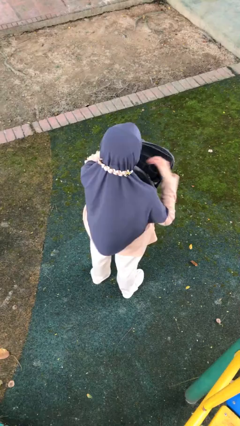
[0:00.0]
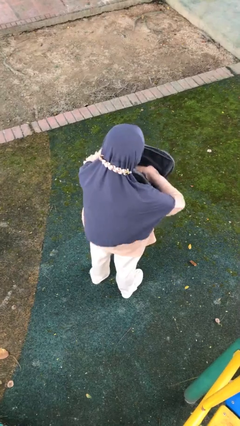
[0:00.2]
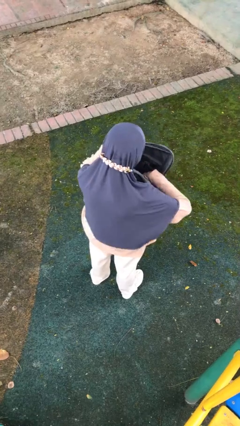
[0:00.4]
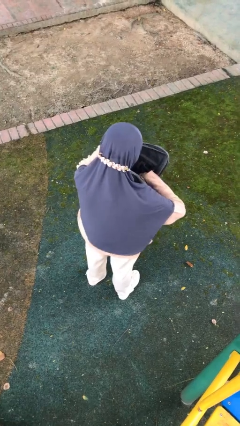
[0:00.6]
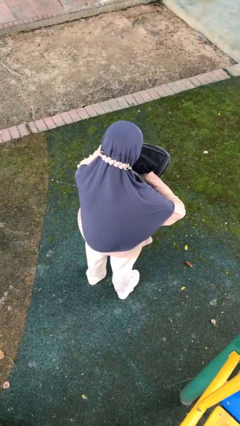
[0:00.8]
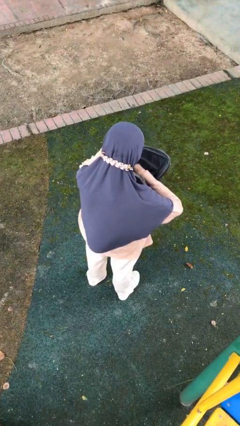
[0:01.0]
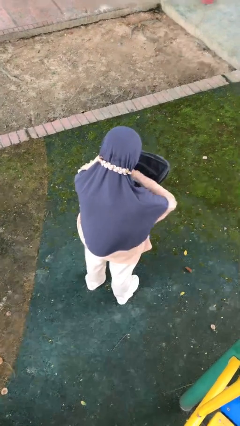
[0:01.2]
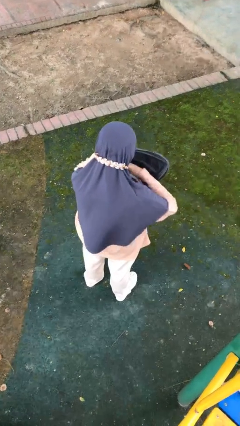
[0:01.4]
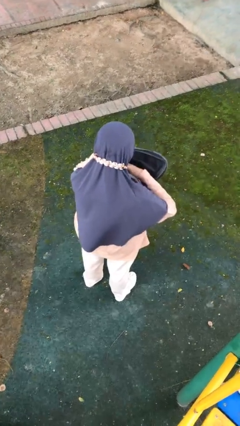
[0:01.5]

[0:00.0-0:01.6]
person searches in backpack

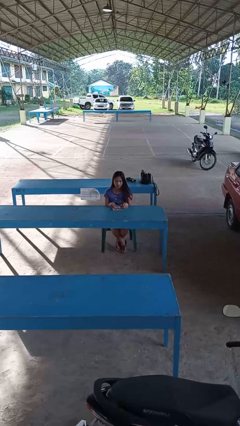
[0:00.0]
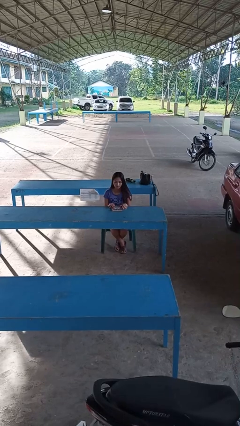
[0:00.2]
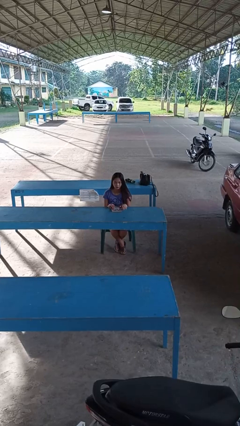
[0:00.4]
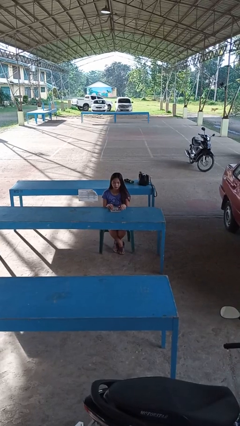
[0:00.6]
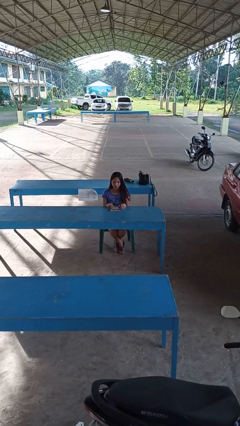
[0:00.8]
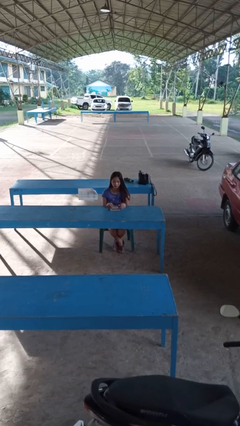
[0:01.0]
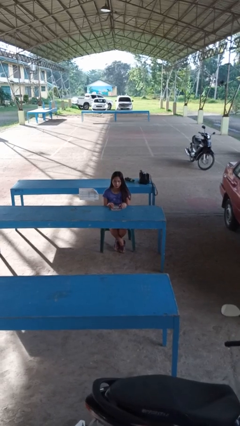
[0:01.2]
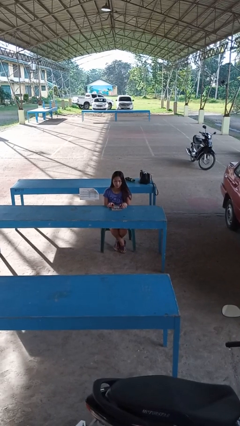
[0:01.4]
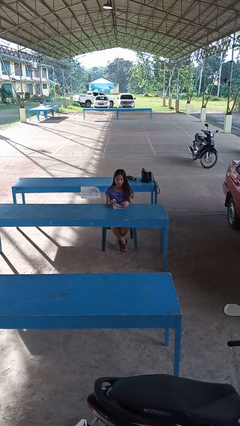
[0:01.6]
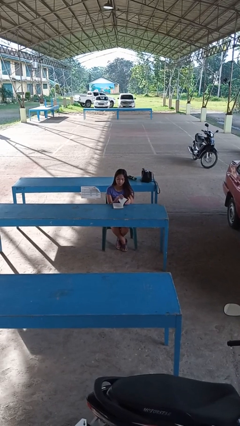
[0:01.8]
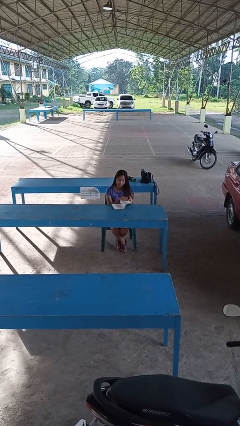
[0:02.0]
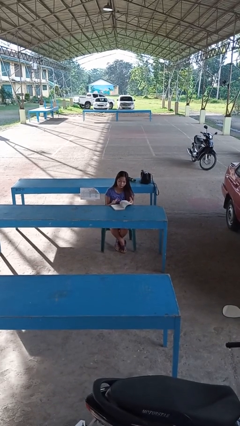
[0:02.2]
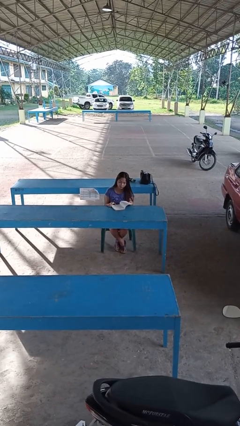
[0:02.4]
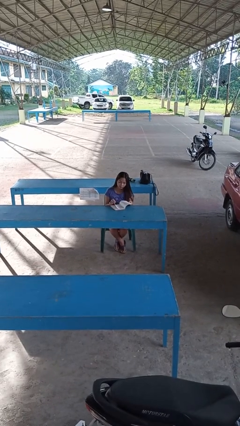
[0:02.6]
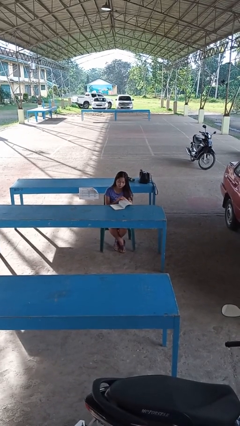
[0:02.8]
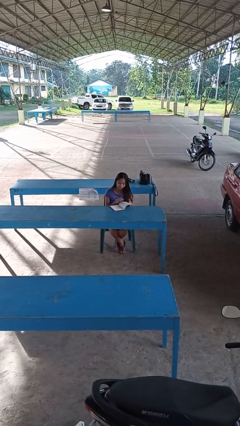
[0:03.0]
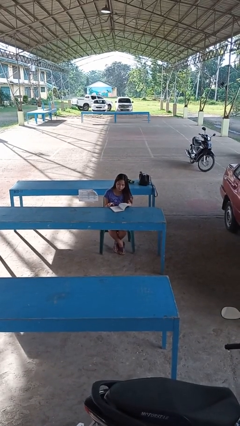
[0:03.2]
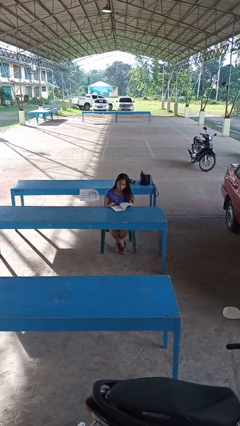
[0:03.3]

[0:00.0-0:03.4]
person reads book

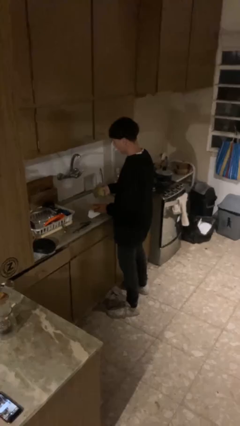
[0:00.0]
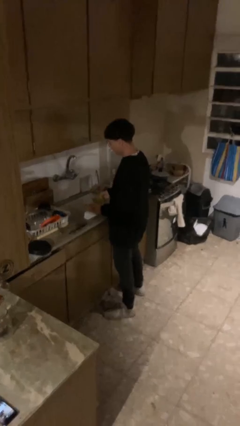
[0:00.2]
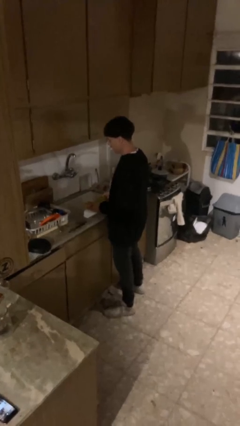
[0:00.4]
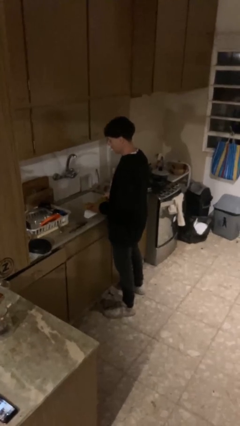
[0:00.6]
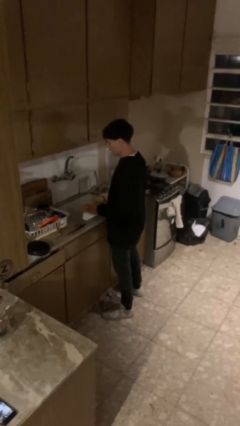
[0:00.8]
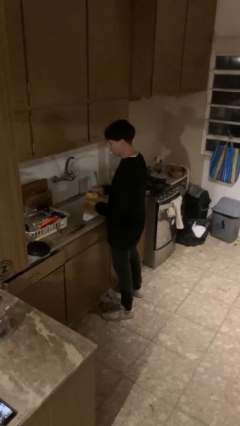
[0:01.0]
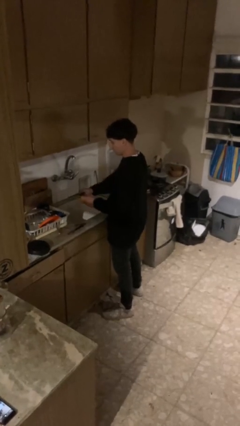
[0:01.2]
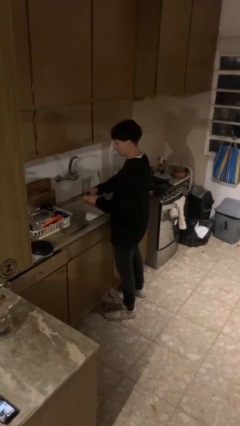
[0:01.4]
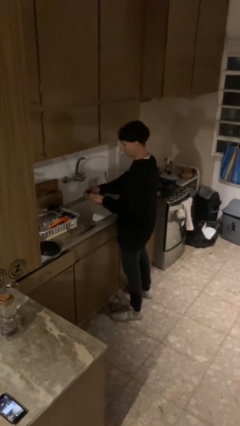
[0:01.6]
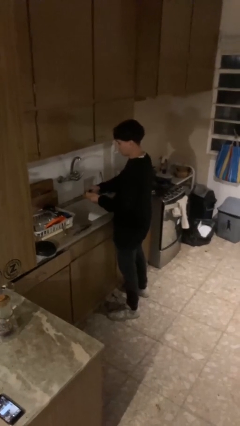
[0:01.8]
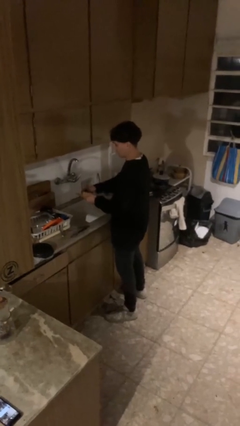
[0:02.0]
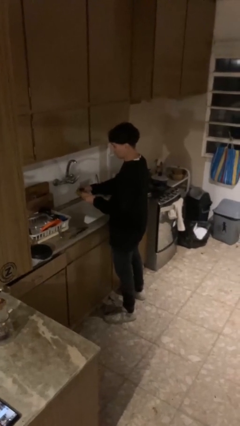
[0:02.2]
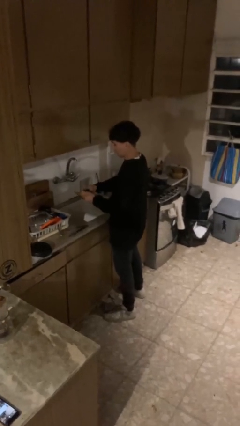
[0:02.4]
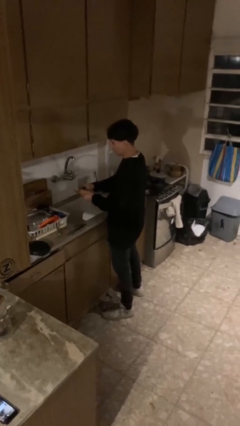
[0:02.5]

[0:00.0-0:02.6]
person washes dish

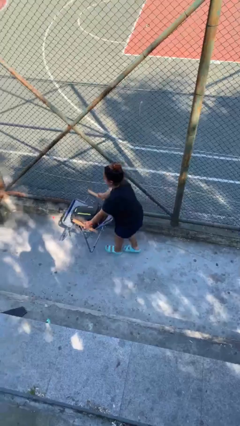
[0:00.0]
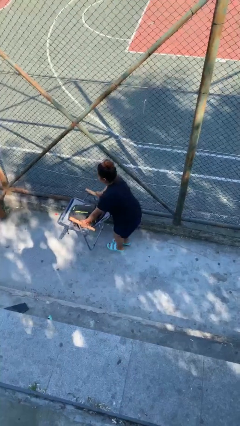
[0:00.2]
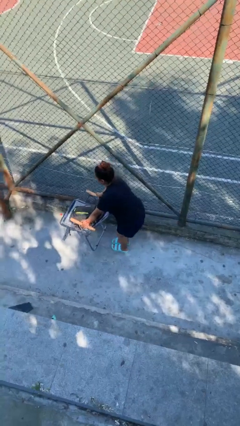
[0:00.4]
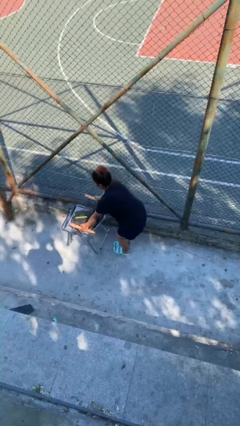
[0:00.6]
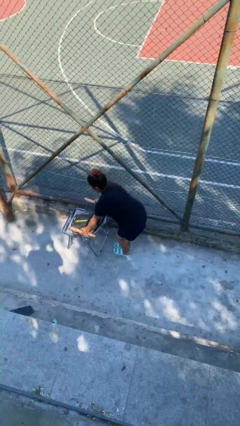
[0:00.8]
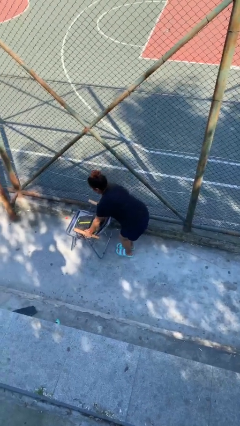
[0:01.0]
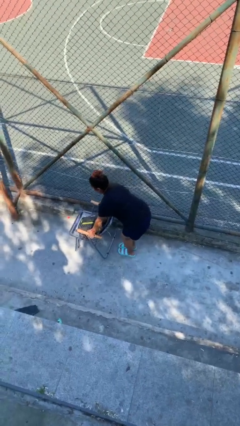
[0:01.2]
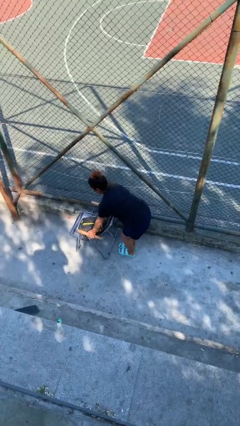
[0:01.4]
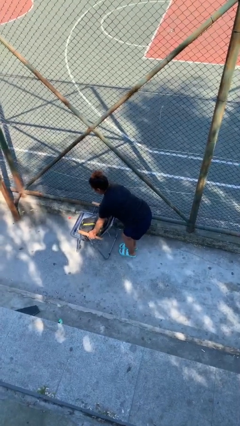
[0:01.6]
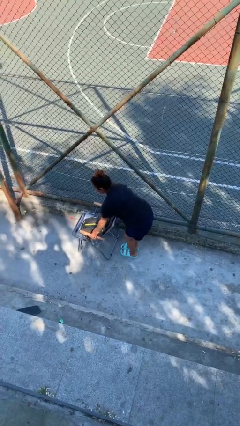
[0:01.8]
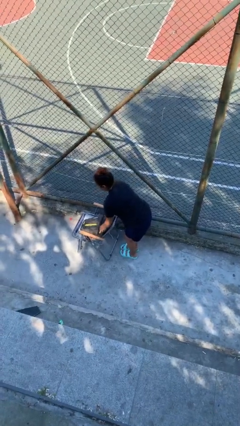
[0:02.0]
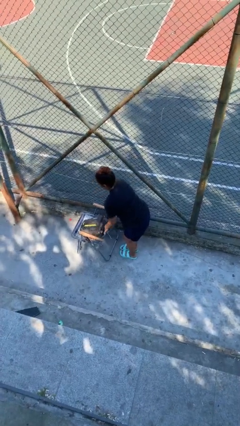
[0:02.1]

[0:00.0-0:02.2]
person puts down object on floor

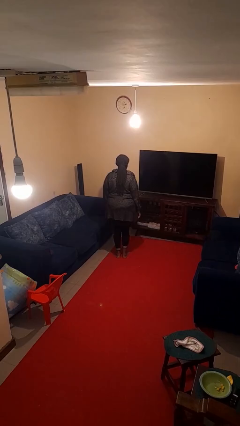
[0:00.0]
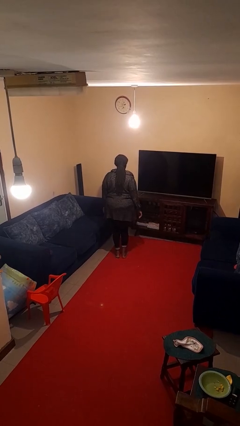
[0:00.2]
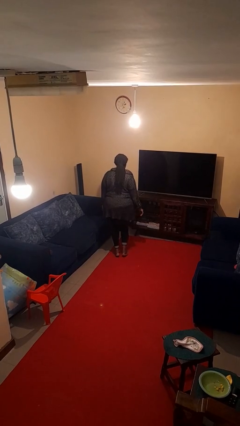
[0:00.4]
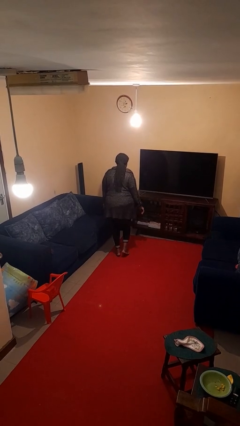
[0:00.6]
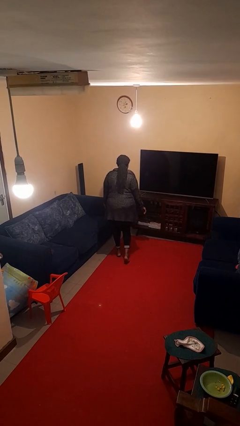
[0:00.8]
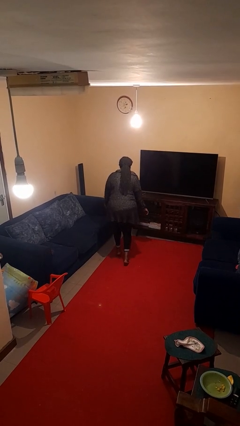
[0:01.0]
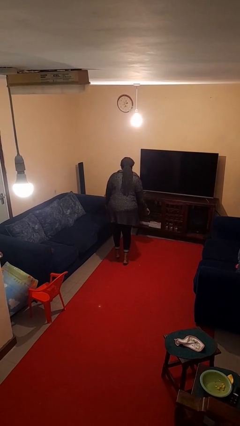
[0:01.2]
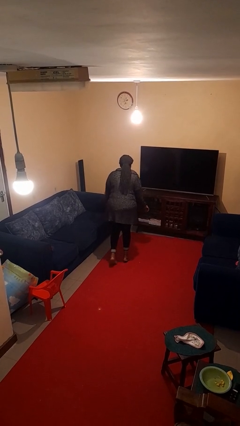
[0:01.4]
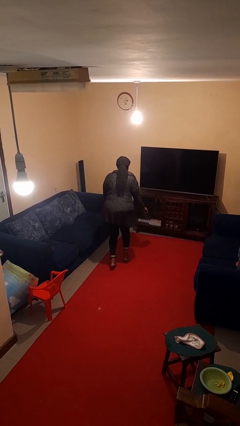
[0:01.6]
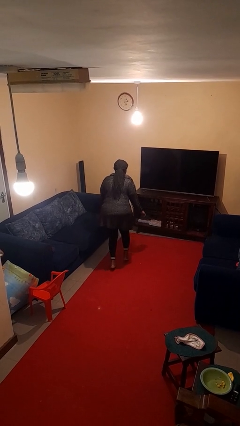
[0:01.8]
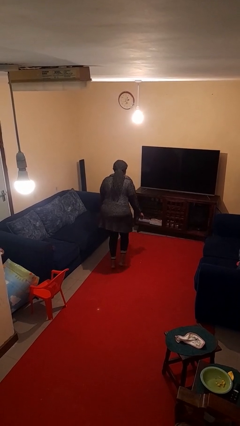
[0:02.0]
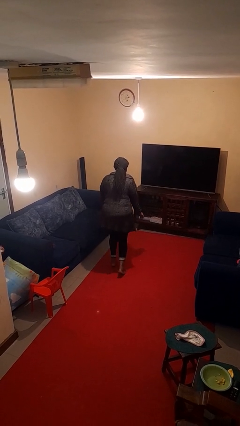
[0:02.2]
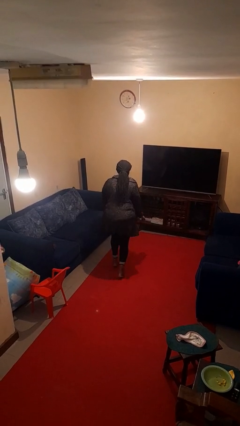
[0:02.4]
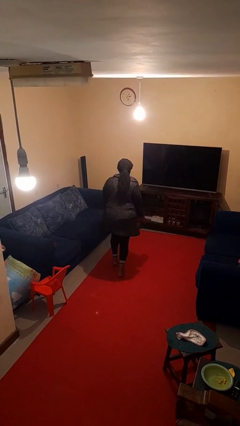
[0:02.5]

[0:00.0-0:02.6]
person walks tiptoe

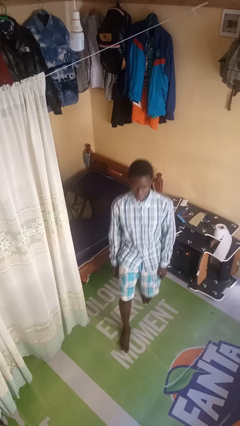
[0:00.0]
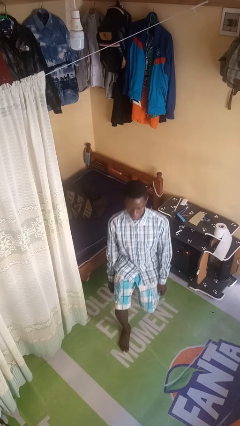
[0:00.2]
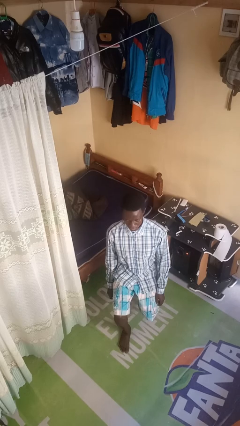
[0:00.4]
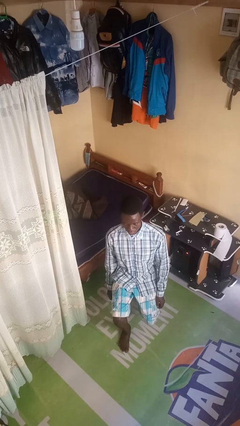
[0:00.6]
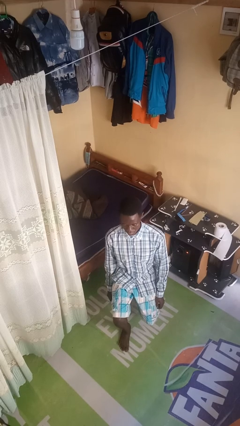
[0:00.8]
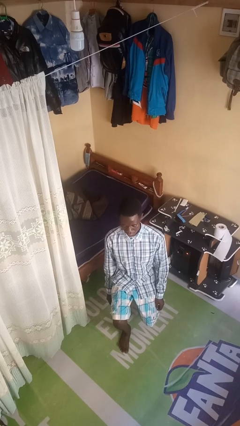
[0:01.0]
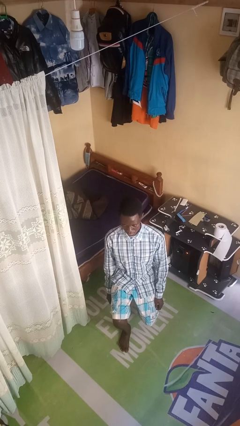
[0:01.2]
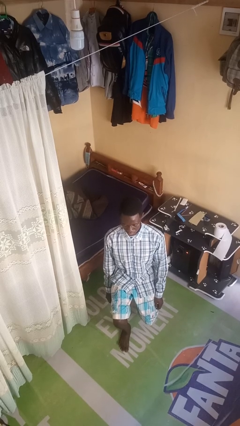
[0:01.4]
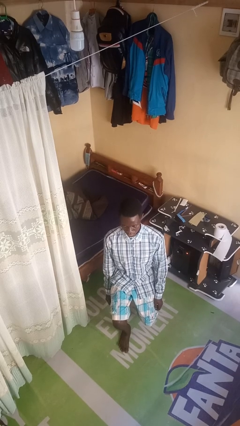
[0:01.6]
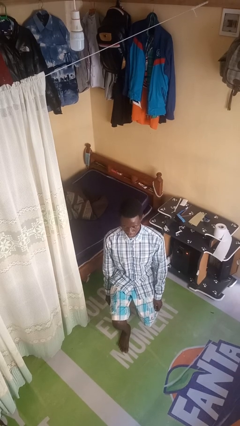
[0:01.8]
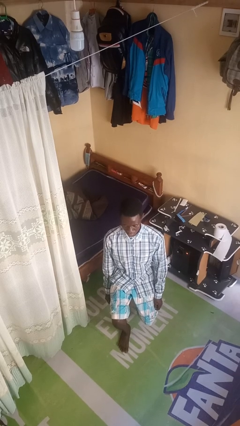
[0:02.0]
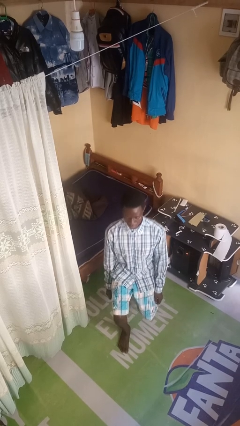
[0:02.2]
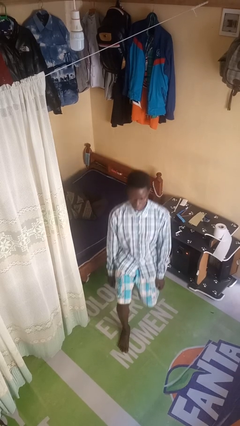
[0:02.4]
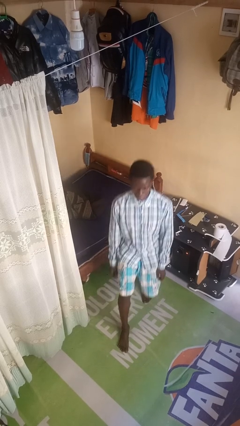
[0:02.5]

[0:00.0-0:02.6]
person exercises with lunges

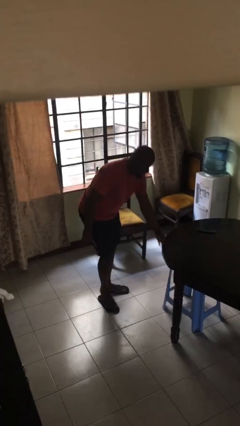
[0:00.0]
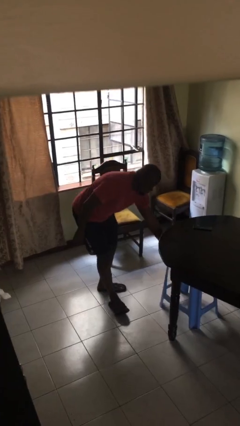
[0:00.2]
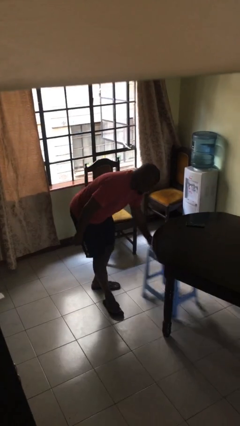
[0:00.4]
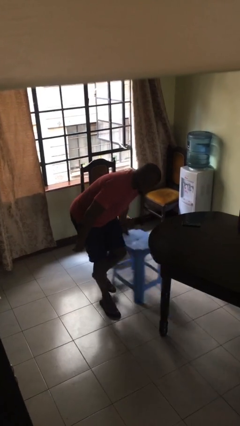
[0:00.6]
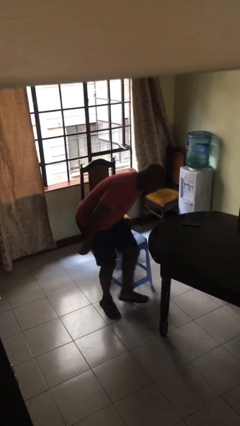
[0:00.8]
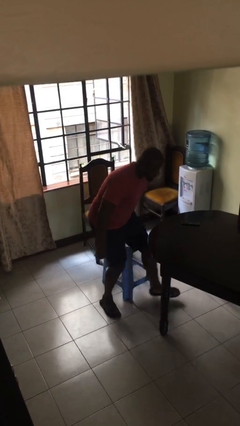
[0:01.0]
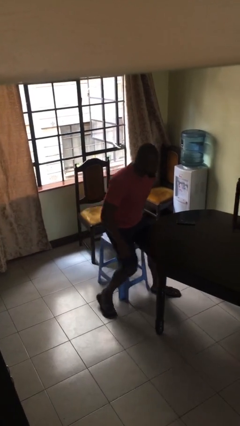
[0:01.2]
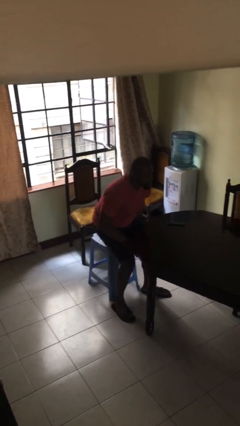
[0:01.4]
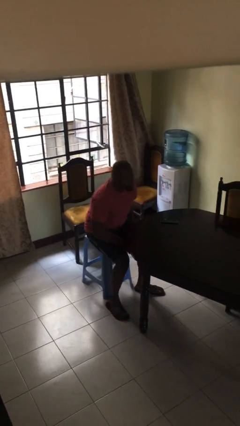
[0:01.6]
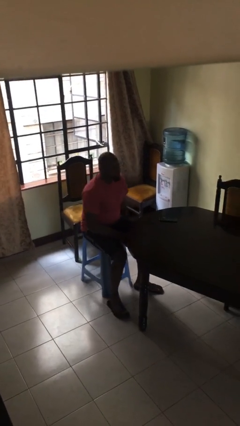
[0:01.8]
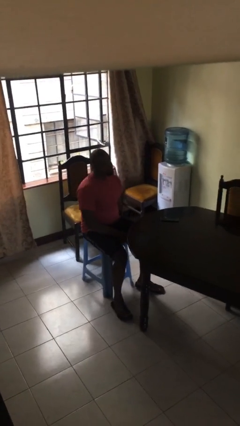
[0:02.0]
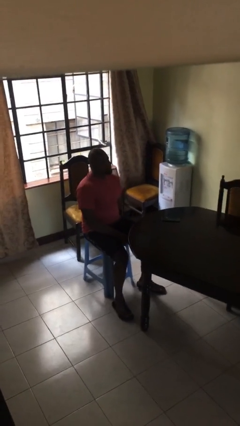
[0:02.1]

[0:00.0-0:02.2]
person sits down
